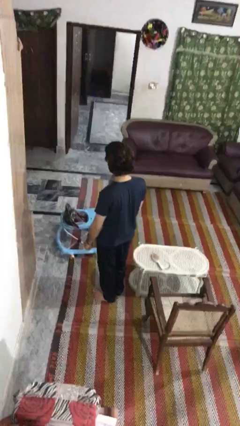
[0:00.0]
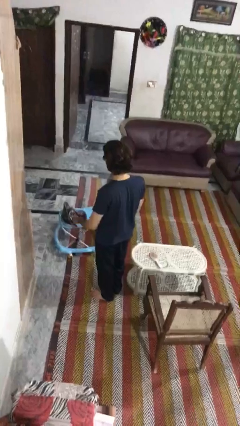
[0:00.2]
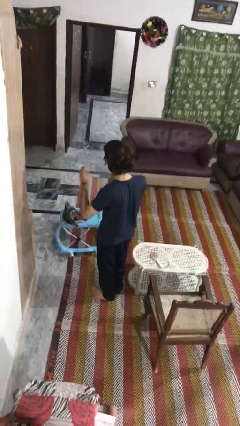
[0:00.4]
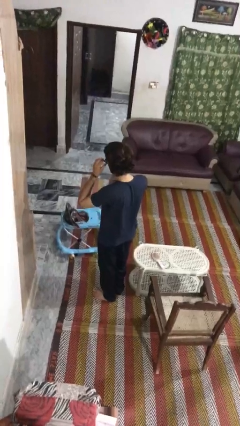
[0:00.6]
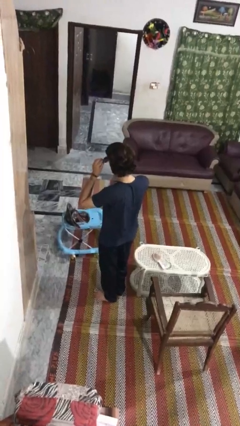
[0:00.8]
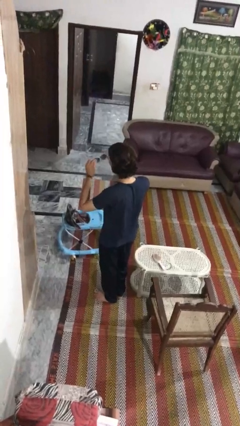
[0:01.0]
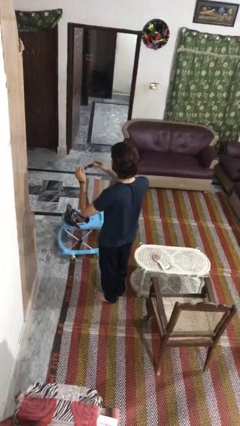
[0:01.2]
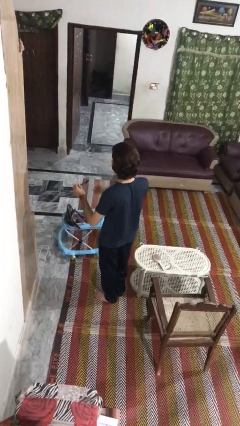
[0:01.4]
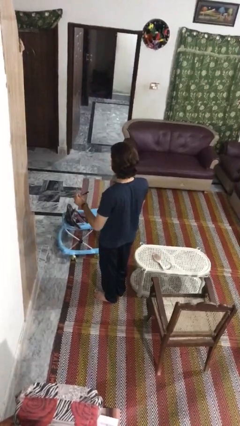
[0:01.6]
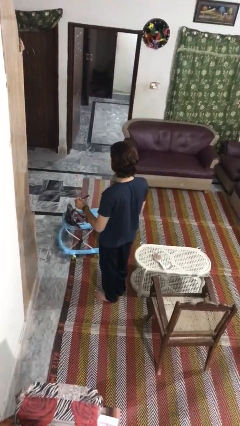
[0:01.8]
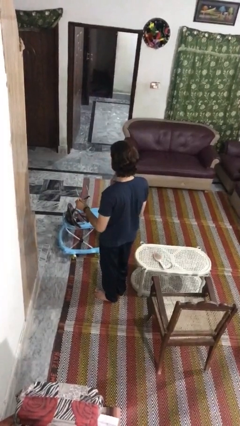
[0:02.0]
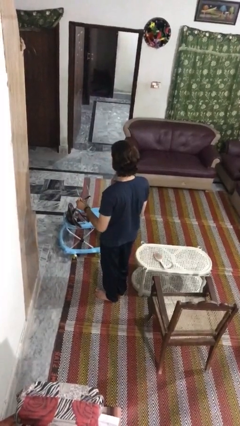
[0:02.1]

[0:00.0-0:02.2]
person takes off sunglasses

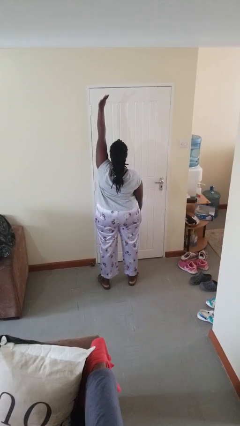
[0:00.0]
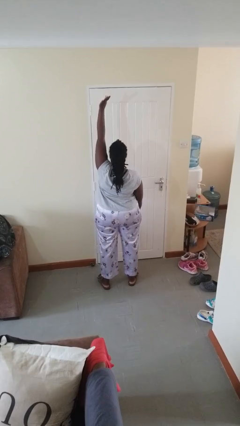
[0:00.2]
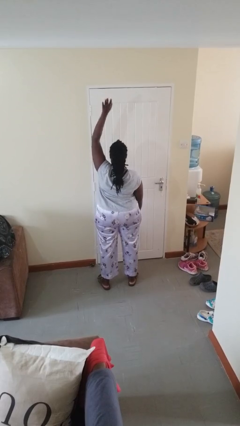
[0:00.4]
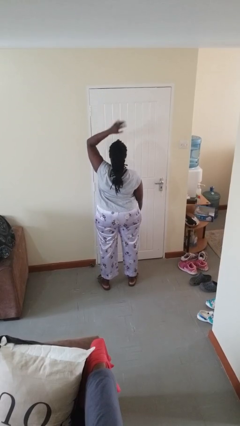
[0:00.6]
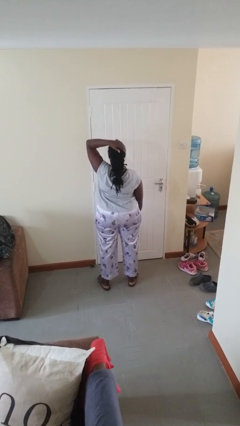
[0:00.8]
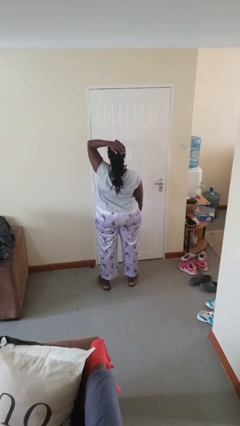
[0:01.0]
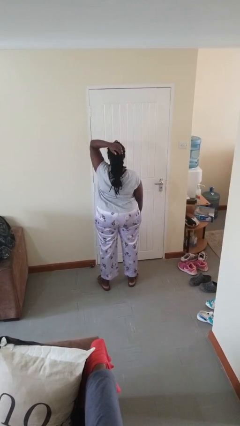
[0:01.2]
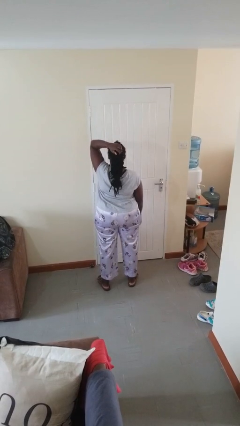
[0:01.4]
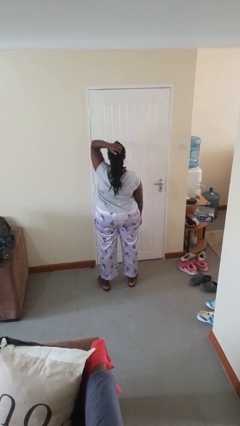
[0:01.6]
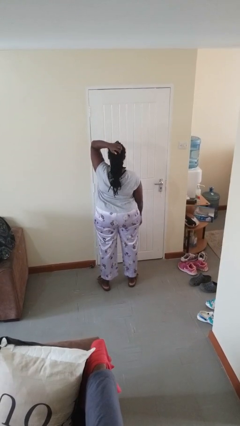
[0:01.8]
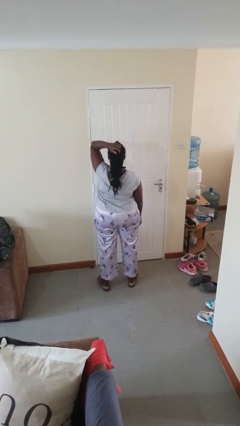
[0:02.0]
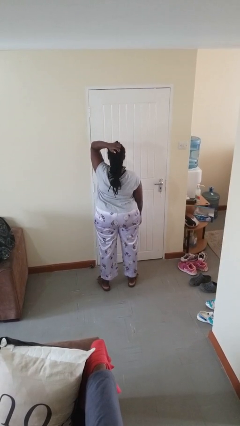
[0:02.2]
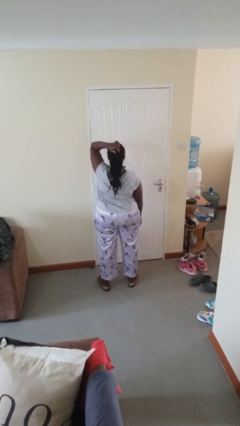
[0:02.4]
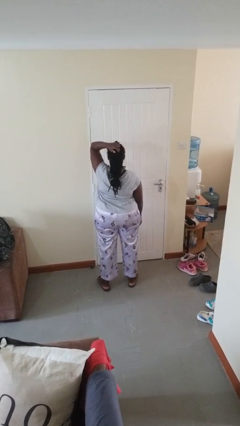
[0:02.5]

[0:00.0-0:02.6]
person gestures lower hand

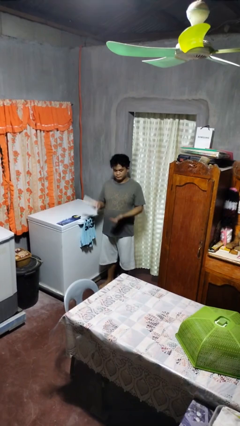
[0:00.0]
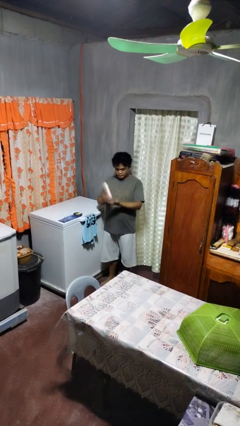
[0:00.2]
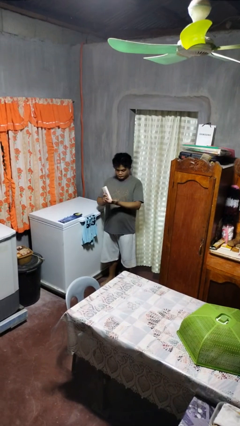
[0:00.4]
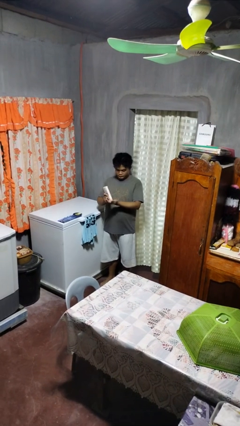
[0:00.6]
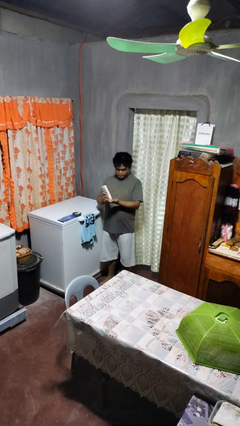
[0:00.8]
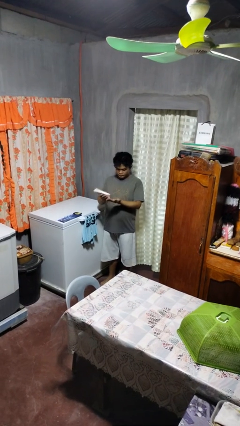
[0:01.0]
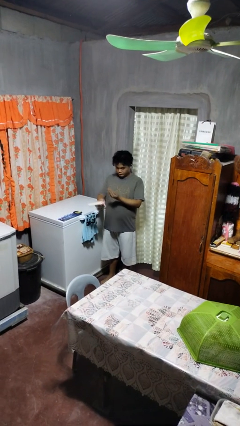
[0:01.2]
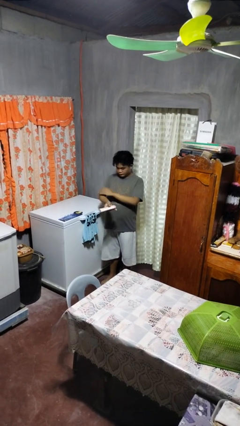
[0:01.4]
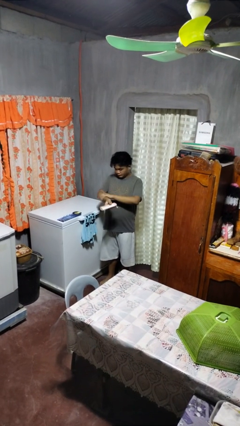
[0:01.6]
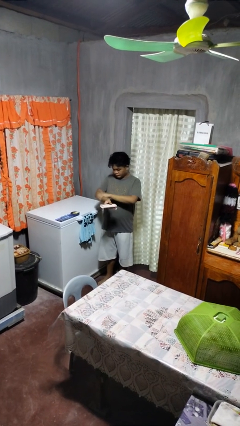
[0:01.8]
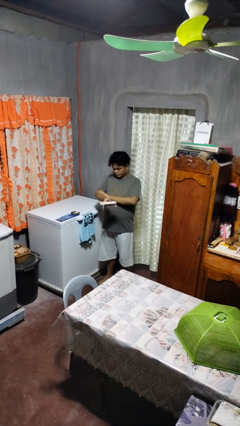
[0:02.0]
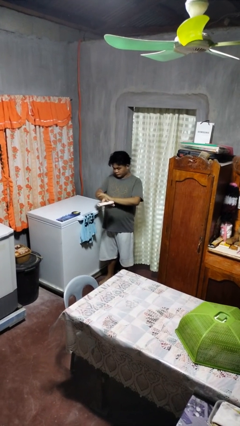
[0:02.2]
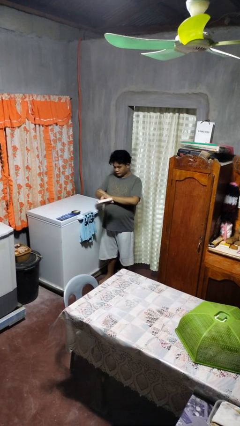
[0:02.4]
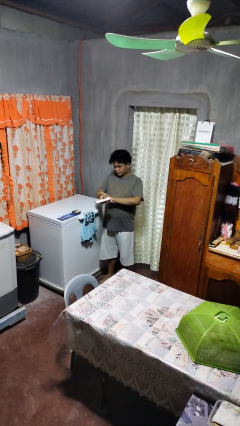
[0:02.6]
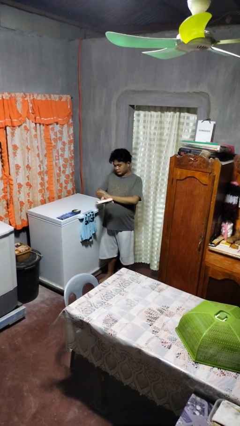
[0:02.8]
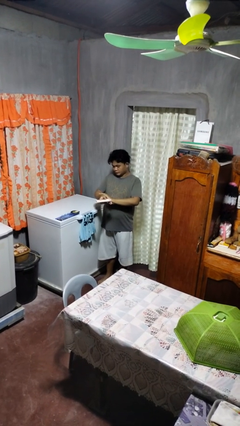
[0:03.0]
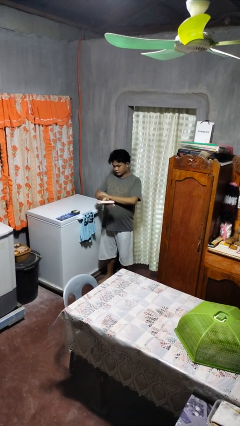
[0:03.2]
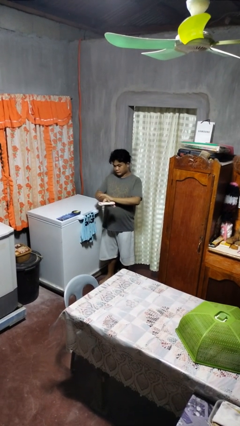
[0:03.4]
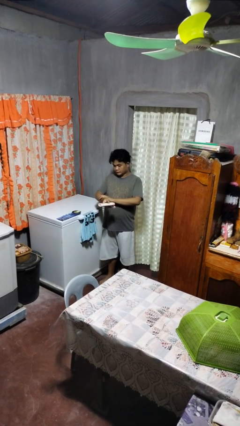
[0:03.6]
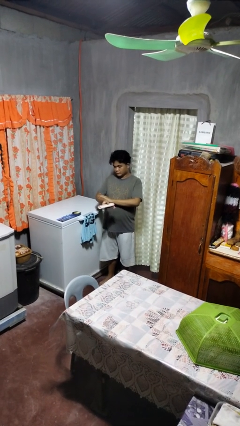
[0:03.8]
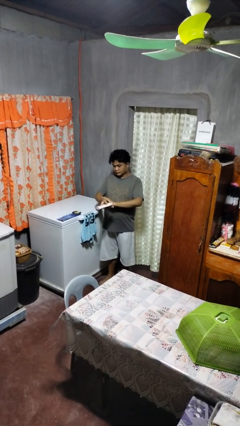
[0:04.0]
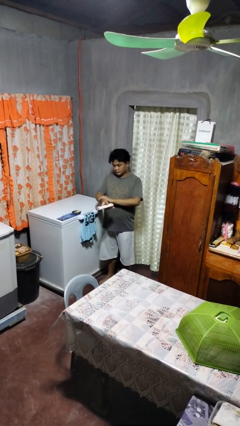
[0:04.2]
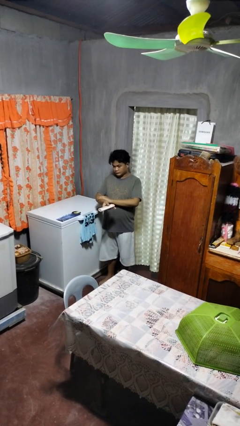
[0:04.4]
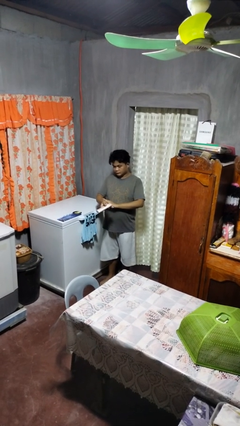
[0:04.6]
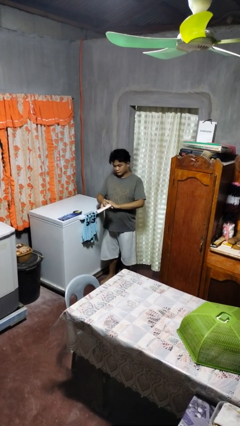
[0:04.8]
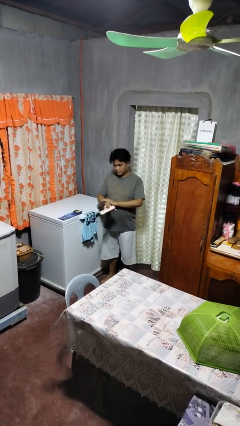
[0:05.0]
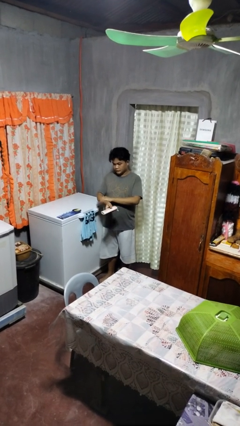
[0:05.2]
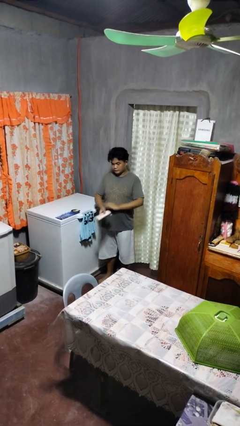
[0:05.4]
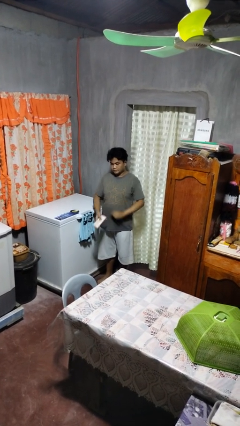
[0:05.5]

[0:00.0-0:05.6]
person applies sunscreen

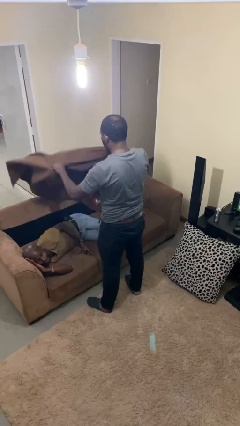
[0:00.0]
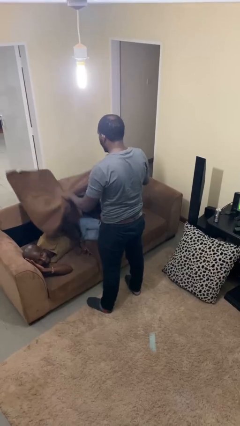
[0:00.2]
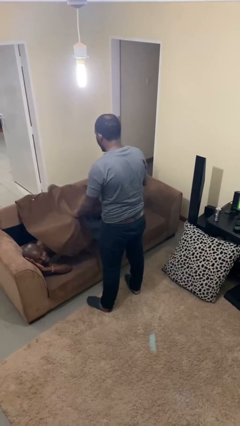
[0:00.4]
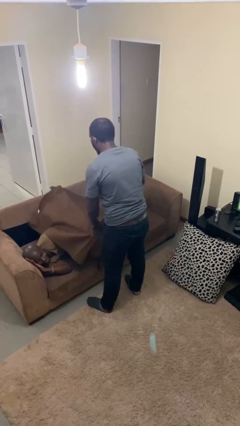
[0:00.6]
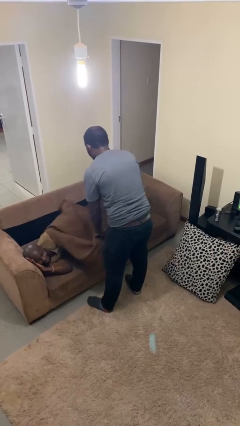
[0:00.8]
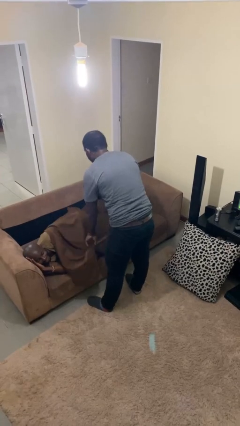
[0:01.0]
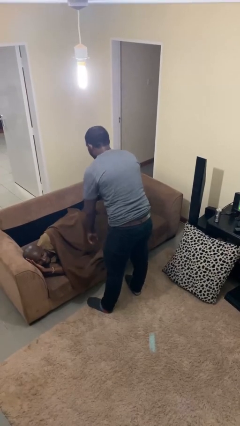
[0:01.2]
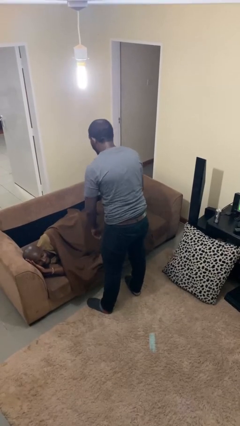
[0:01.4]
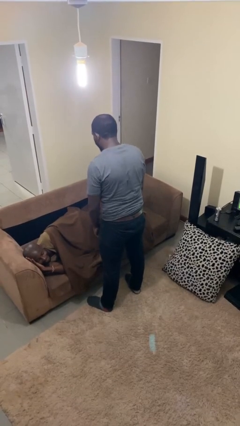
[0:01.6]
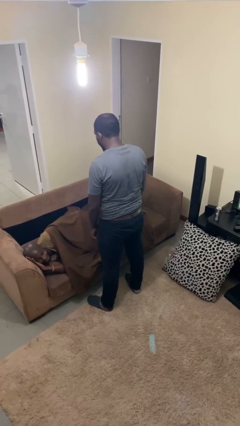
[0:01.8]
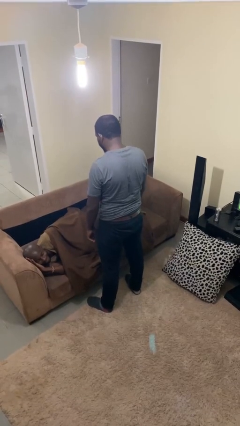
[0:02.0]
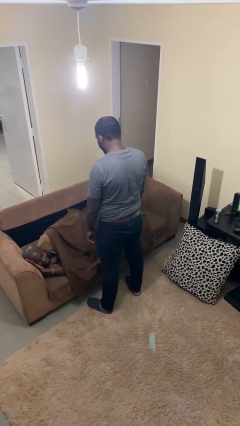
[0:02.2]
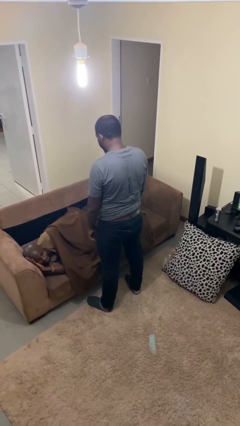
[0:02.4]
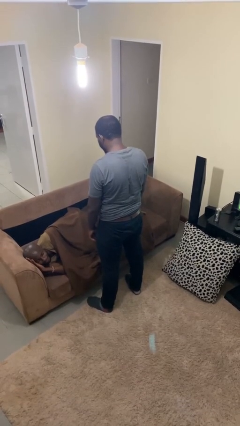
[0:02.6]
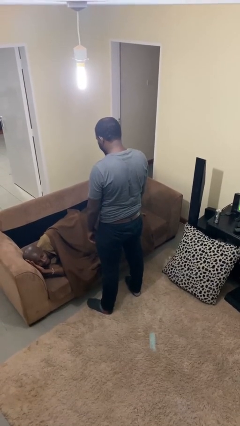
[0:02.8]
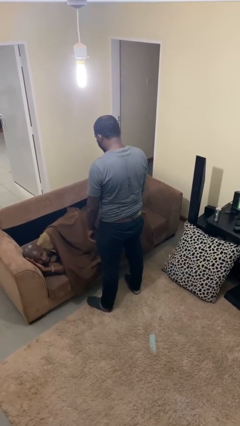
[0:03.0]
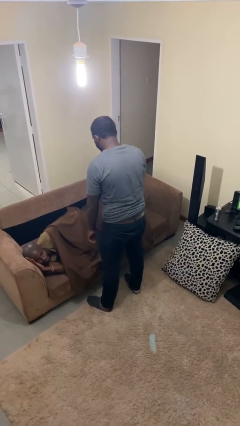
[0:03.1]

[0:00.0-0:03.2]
person covers friend with blanket

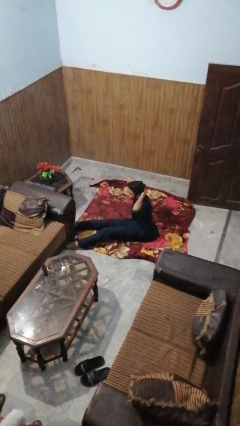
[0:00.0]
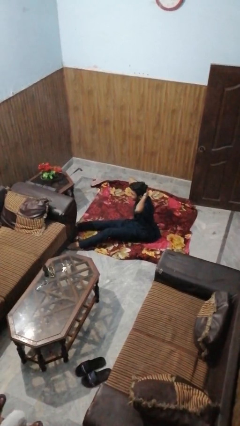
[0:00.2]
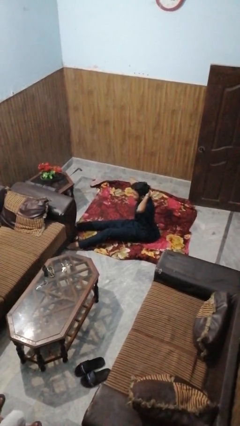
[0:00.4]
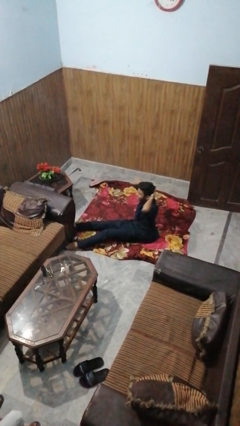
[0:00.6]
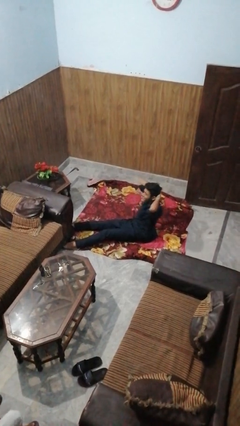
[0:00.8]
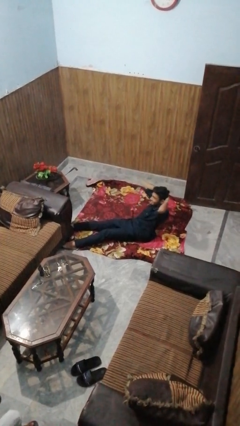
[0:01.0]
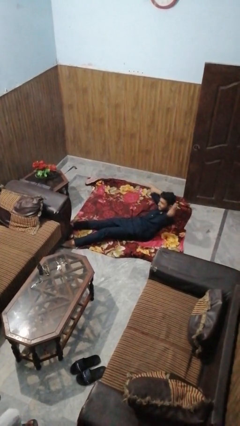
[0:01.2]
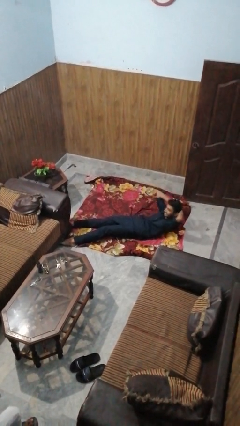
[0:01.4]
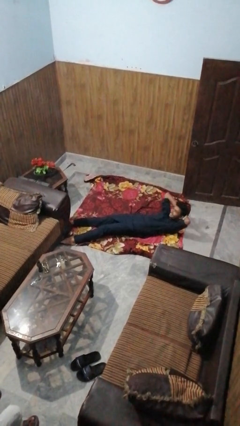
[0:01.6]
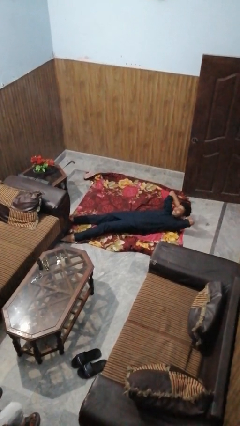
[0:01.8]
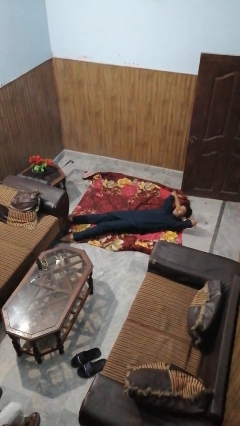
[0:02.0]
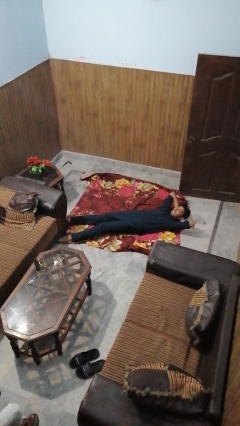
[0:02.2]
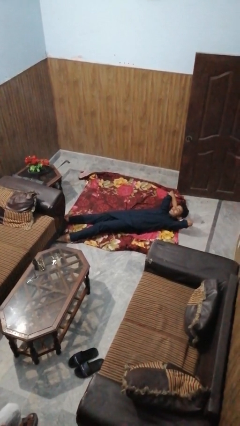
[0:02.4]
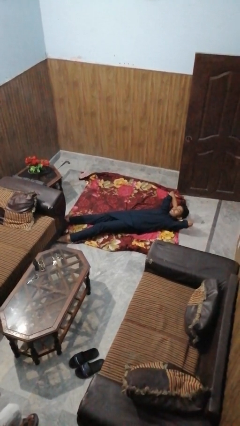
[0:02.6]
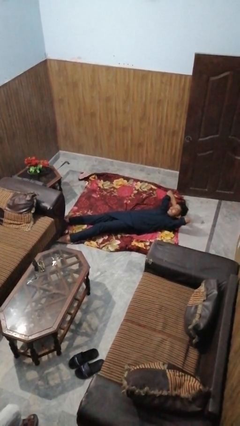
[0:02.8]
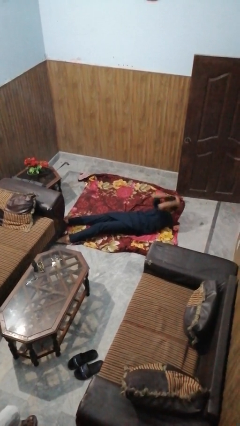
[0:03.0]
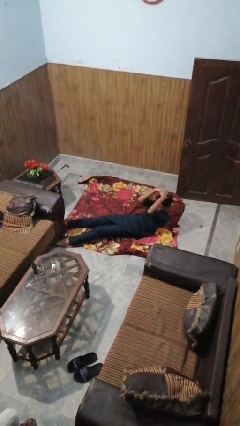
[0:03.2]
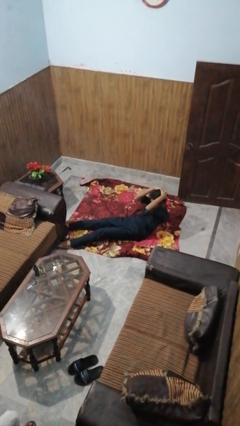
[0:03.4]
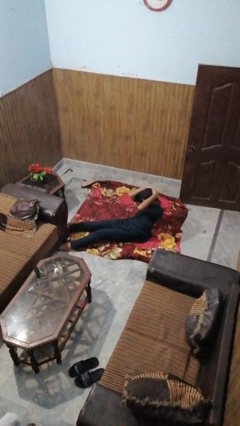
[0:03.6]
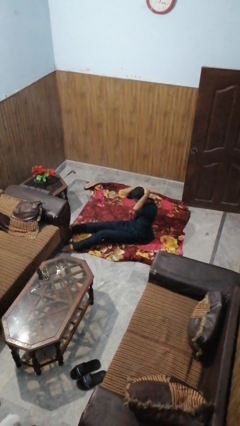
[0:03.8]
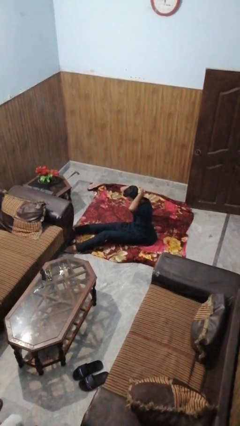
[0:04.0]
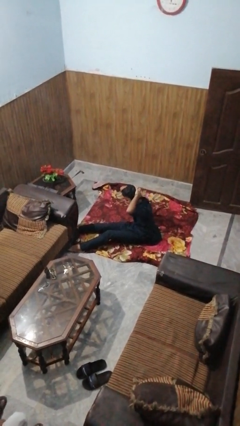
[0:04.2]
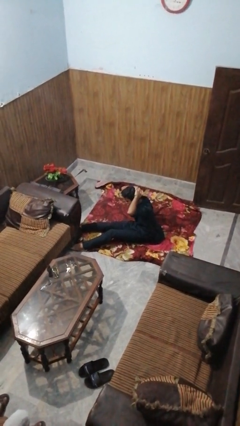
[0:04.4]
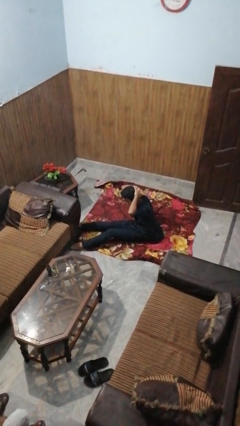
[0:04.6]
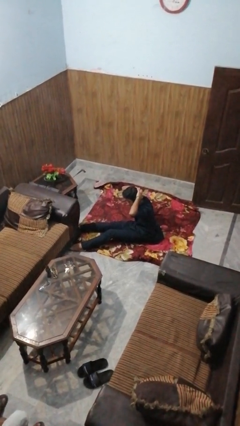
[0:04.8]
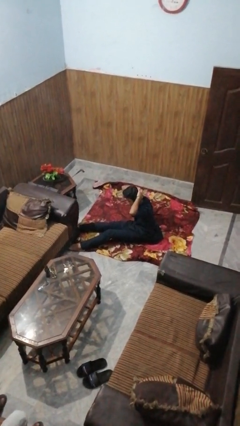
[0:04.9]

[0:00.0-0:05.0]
person exercises with situp
